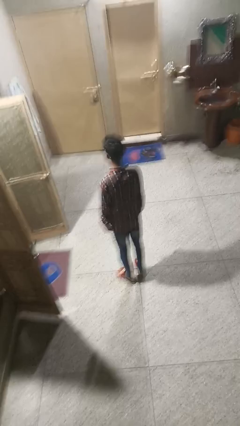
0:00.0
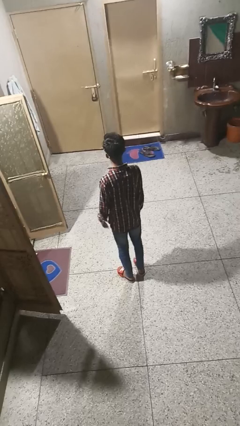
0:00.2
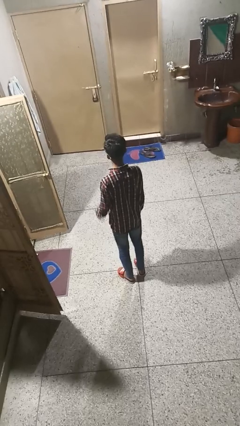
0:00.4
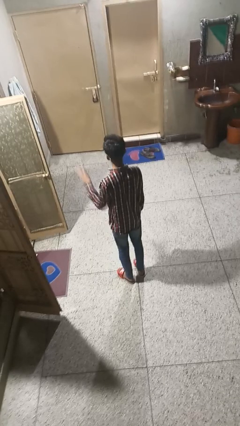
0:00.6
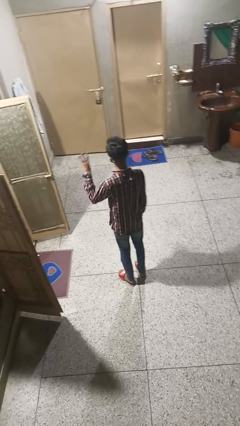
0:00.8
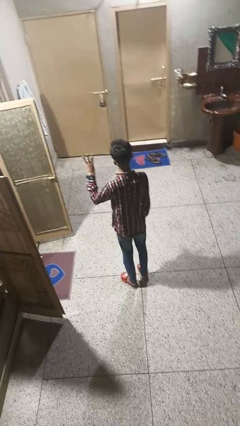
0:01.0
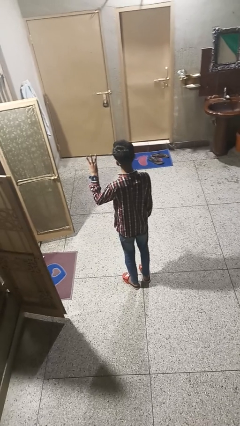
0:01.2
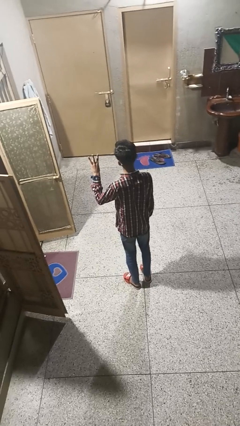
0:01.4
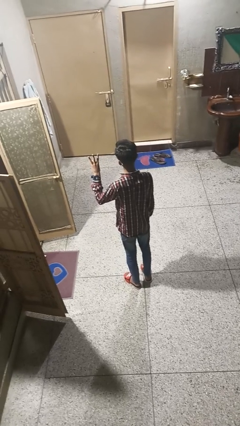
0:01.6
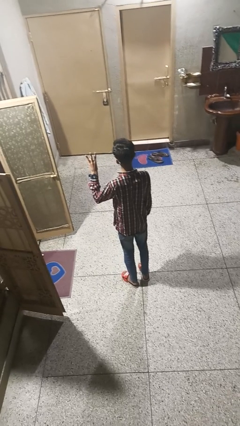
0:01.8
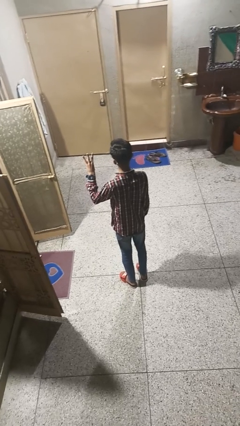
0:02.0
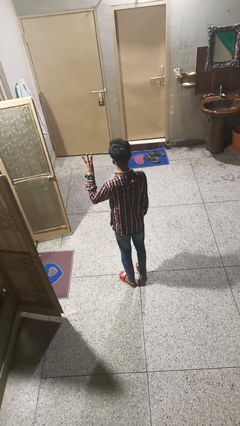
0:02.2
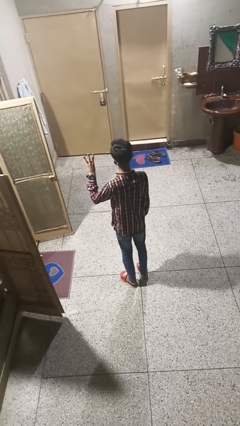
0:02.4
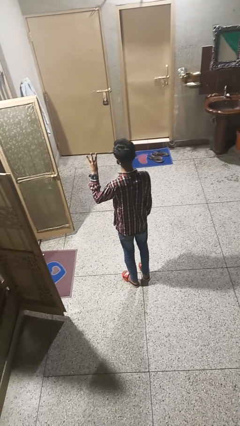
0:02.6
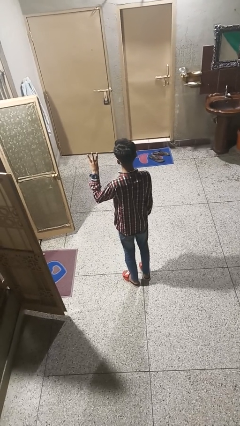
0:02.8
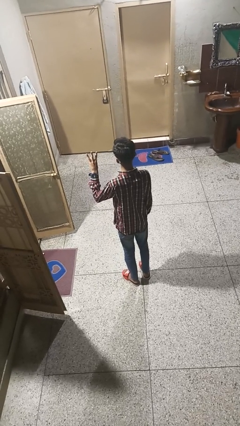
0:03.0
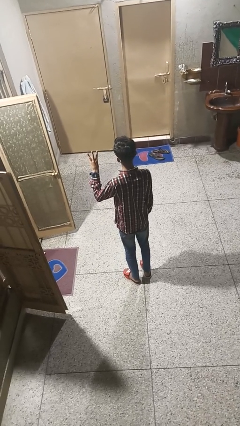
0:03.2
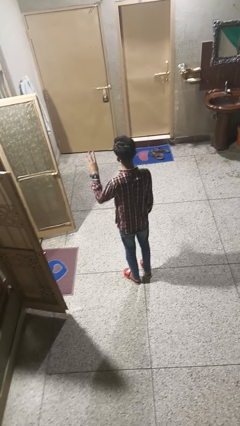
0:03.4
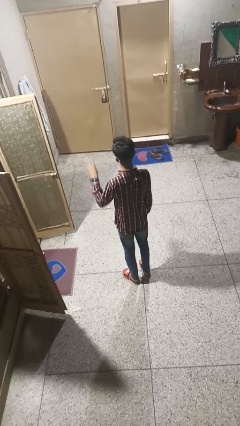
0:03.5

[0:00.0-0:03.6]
person gestures number three

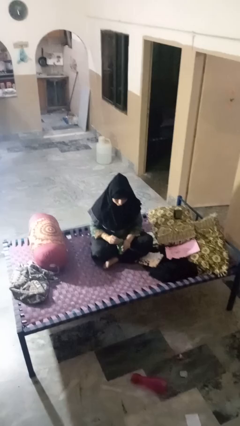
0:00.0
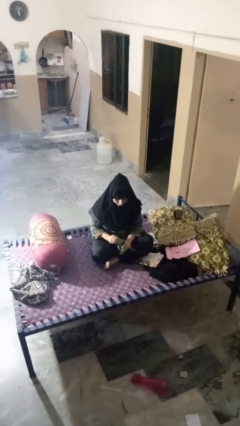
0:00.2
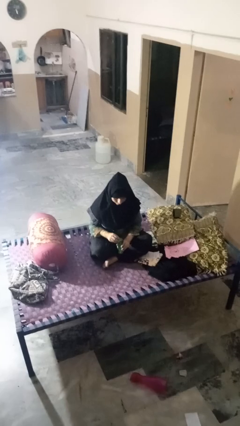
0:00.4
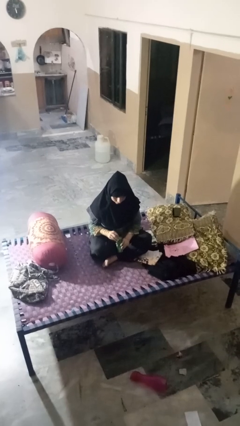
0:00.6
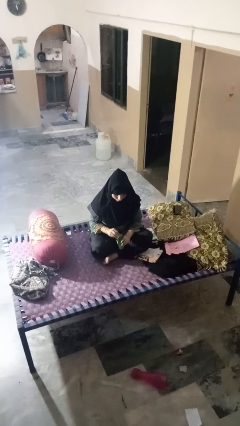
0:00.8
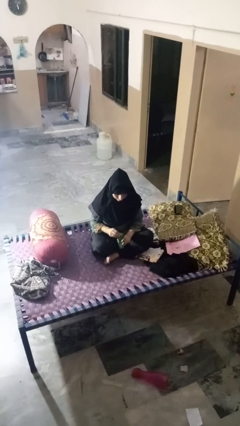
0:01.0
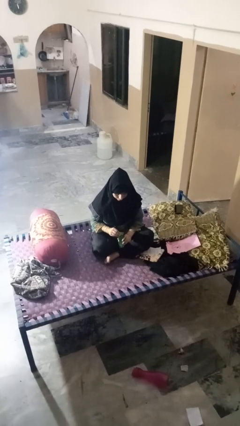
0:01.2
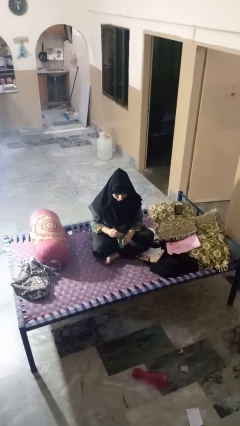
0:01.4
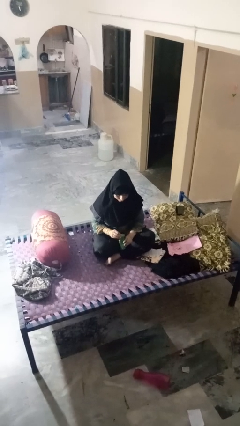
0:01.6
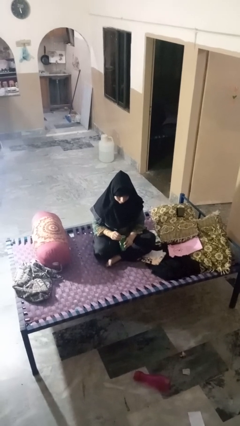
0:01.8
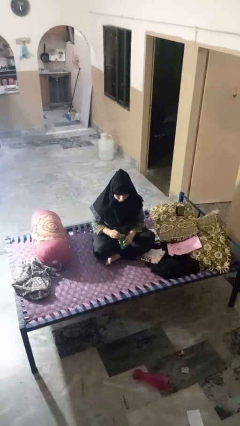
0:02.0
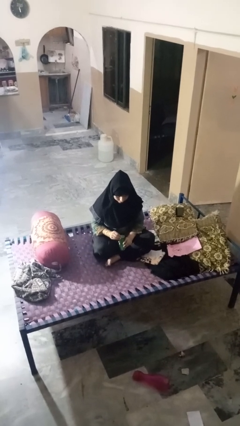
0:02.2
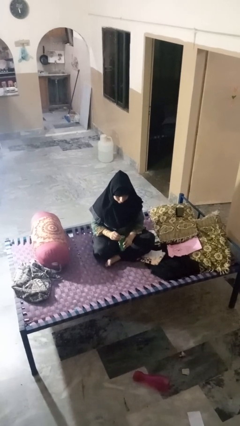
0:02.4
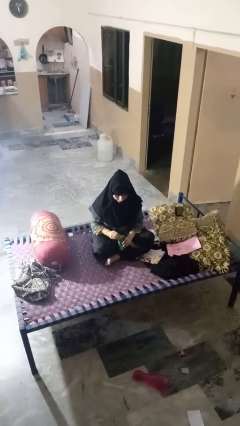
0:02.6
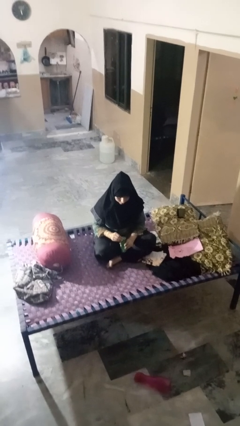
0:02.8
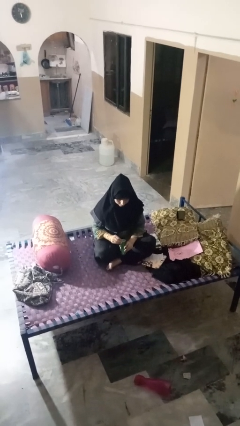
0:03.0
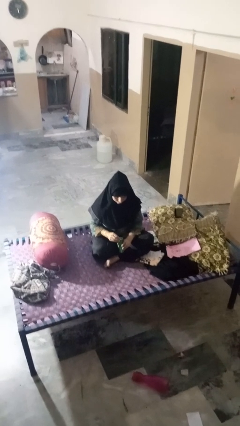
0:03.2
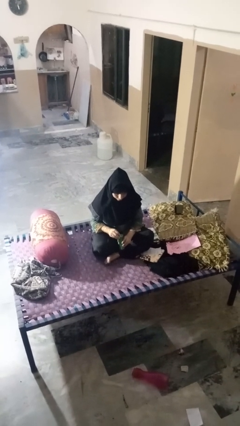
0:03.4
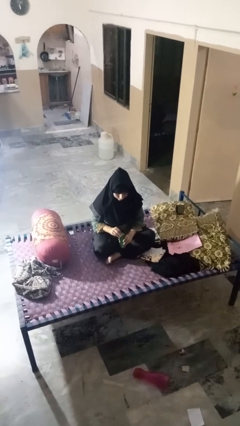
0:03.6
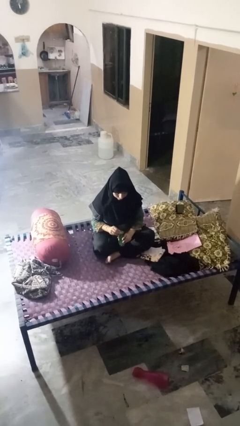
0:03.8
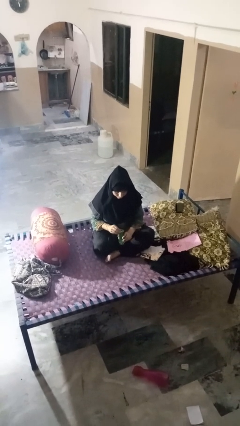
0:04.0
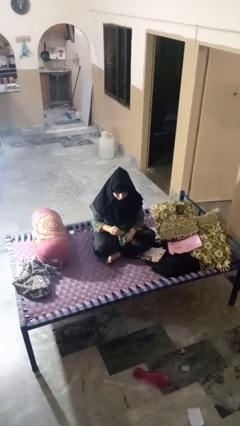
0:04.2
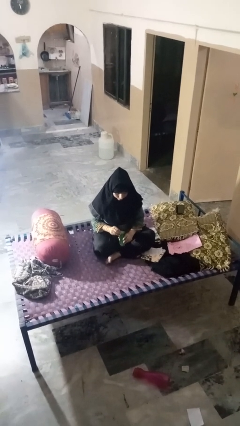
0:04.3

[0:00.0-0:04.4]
person opens can with can opener

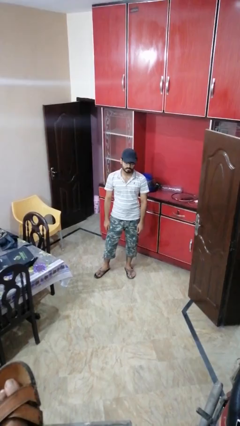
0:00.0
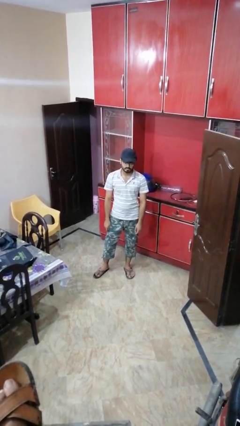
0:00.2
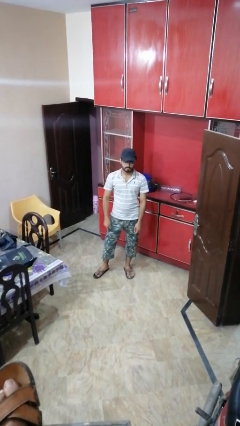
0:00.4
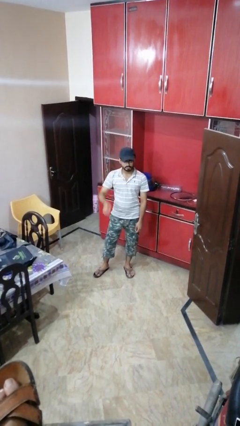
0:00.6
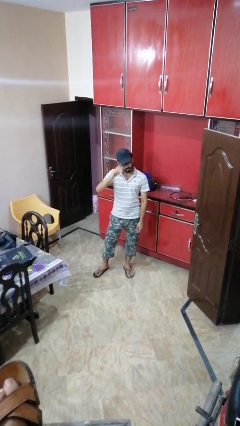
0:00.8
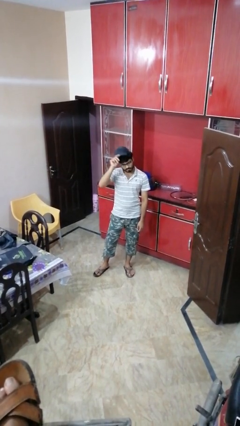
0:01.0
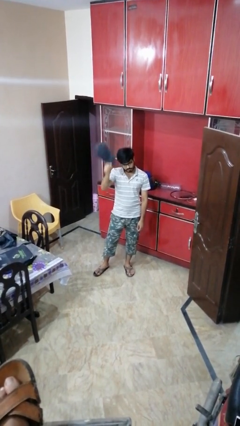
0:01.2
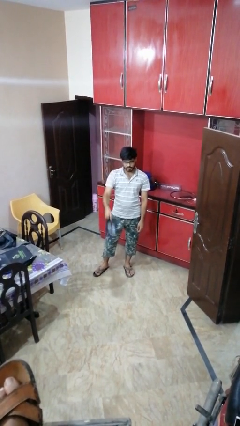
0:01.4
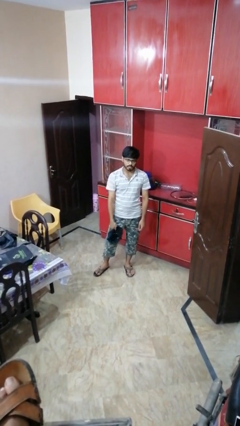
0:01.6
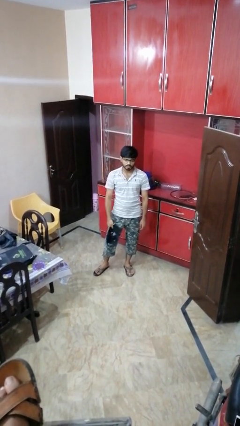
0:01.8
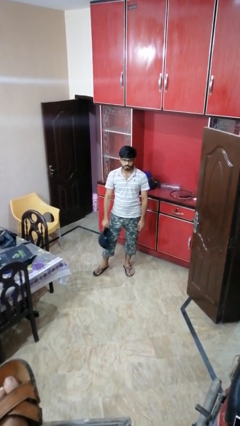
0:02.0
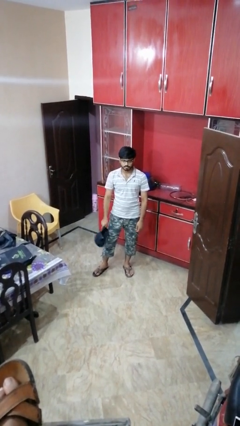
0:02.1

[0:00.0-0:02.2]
person takes off hat

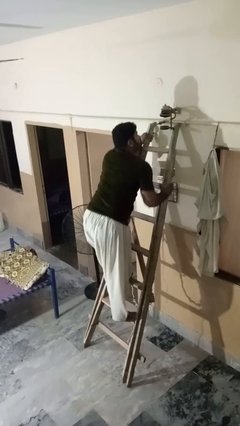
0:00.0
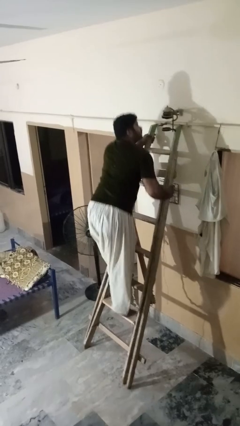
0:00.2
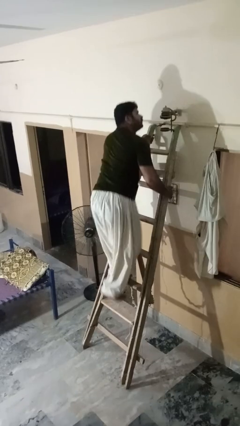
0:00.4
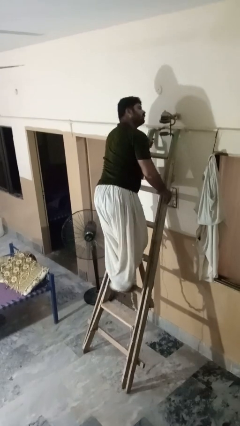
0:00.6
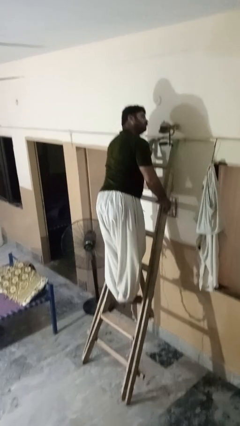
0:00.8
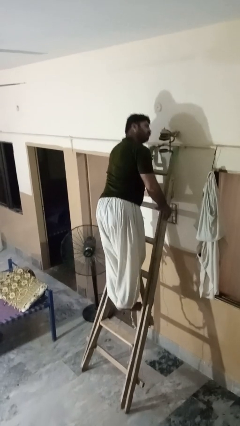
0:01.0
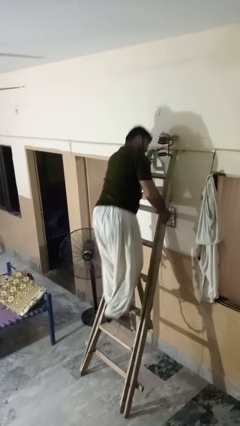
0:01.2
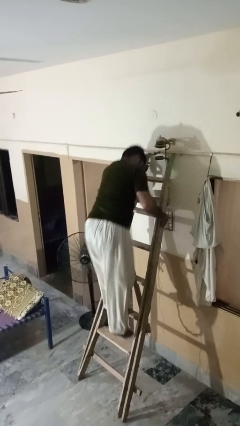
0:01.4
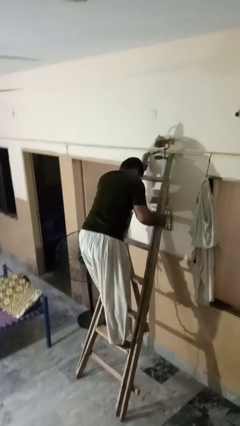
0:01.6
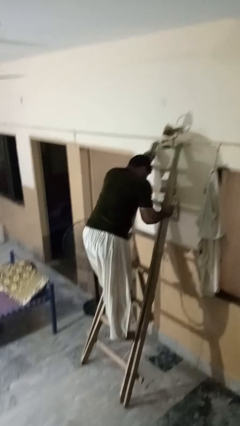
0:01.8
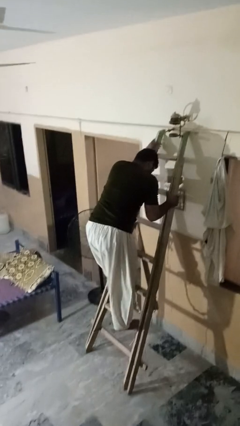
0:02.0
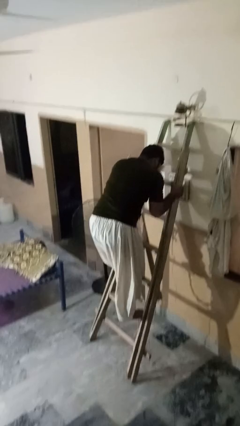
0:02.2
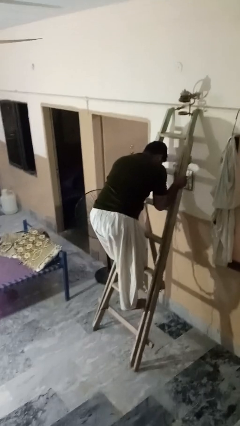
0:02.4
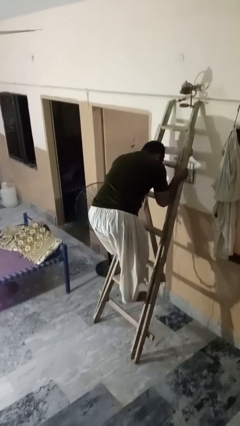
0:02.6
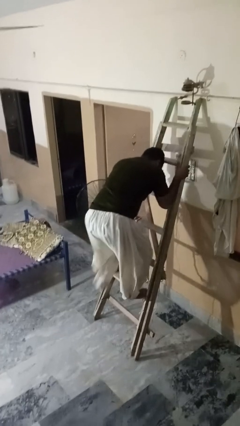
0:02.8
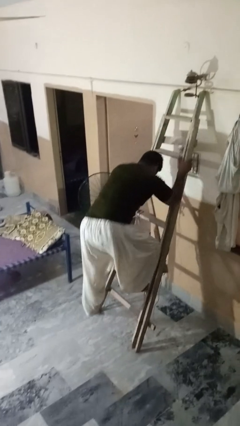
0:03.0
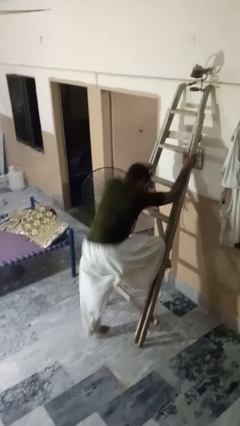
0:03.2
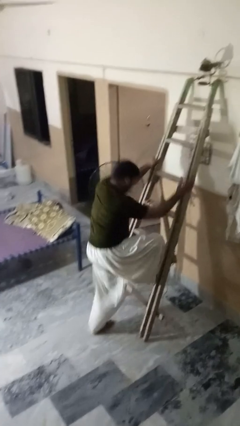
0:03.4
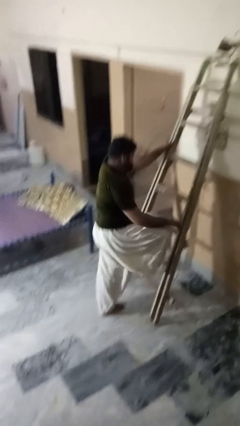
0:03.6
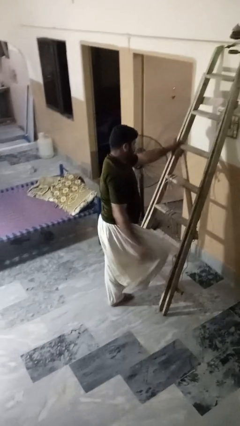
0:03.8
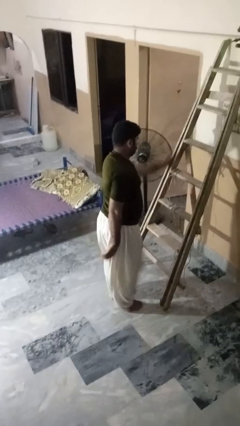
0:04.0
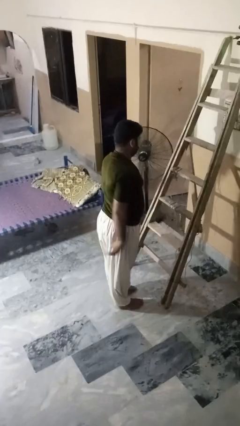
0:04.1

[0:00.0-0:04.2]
person climbs down ladder

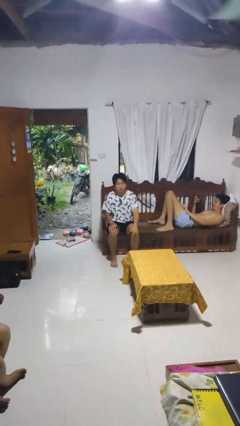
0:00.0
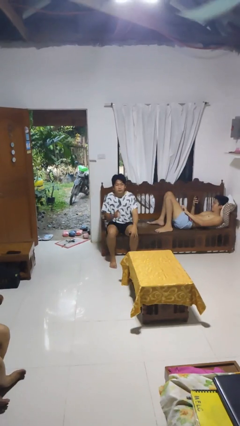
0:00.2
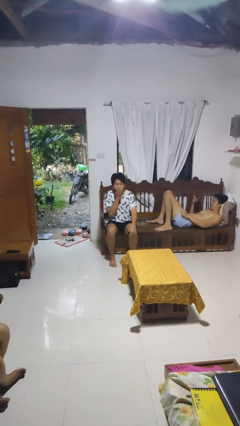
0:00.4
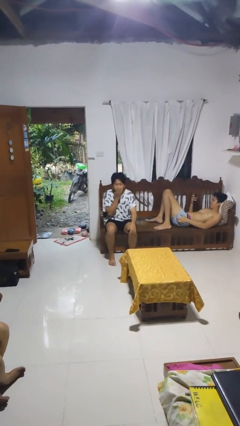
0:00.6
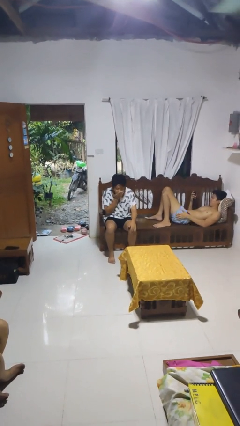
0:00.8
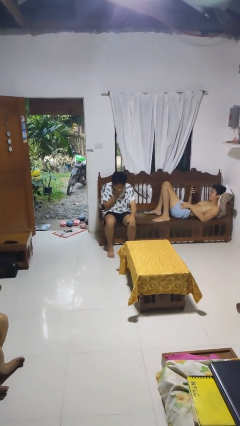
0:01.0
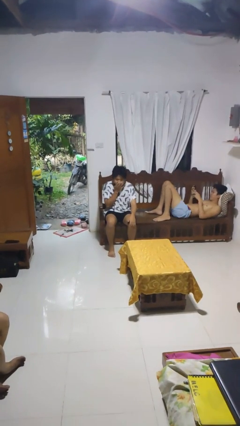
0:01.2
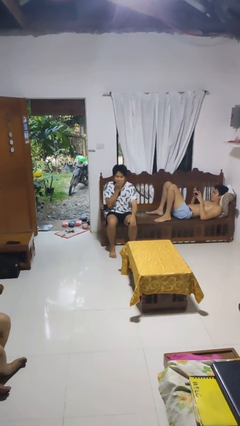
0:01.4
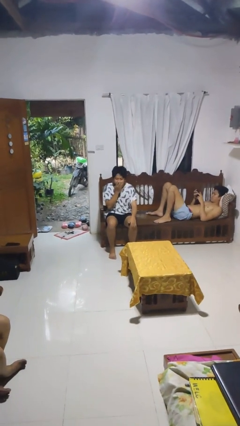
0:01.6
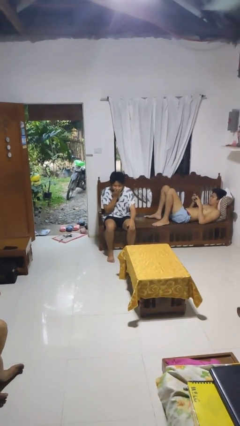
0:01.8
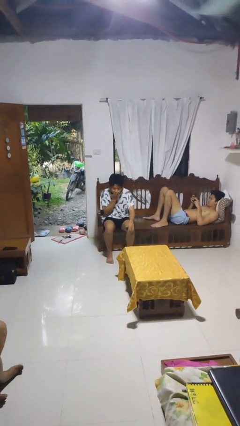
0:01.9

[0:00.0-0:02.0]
person laughs with person

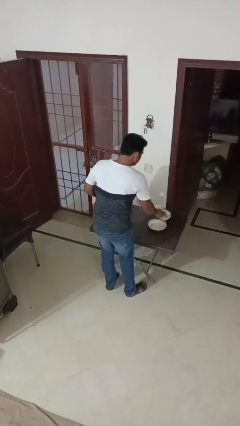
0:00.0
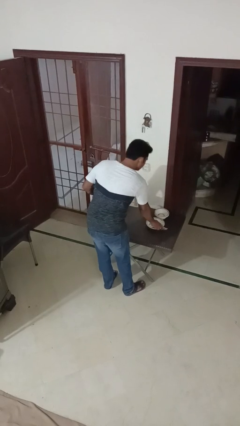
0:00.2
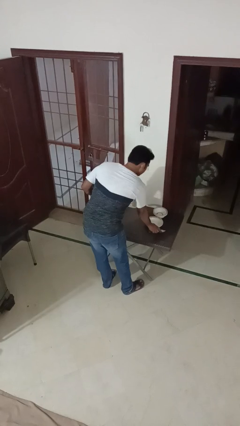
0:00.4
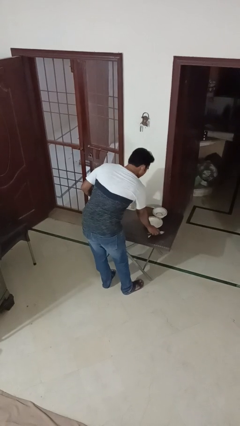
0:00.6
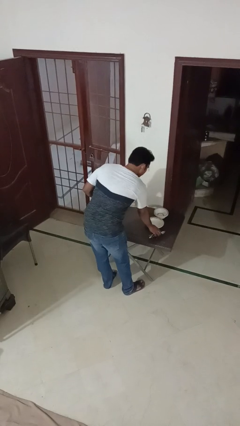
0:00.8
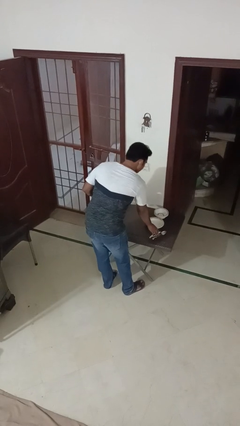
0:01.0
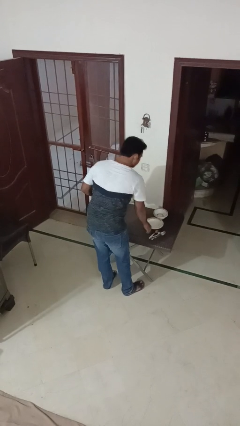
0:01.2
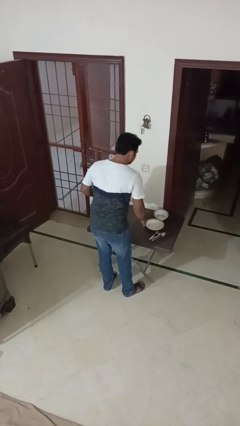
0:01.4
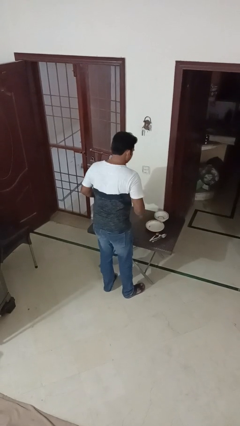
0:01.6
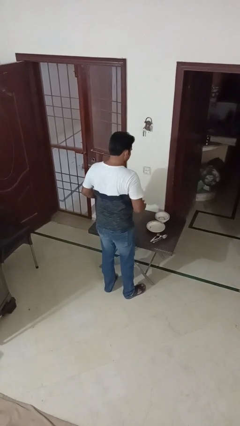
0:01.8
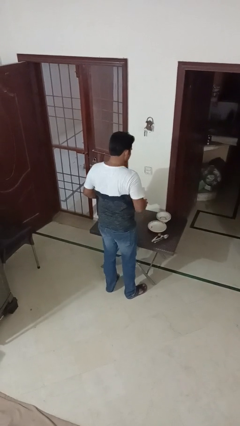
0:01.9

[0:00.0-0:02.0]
person sets table
